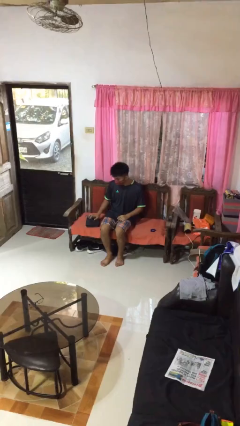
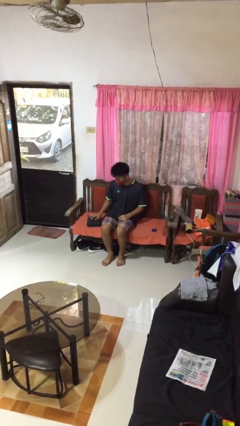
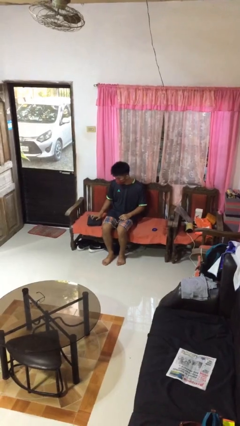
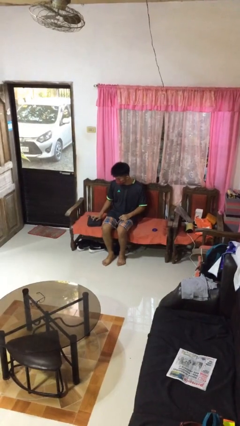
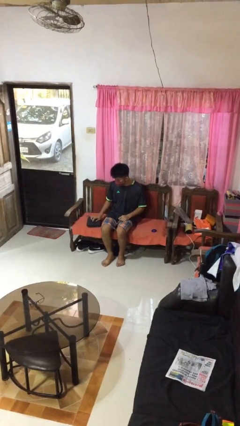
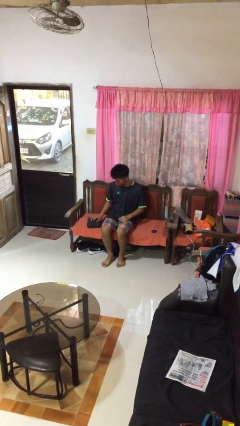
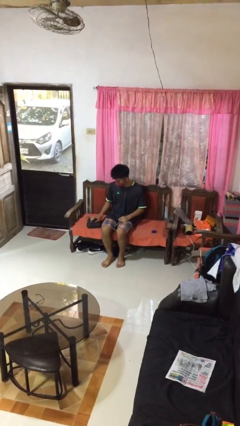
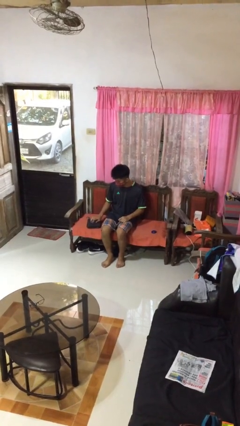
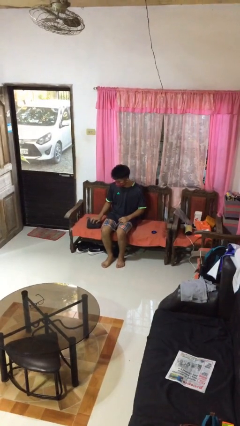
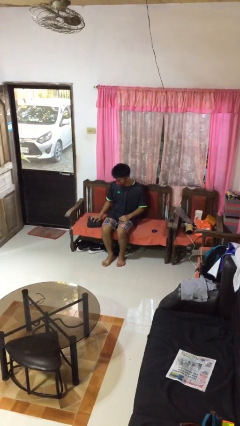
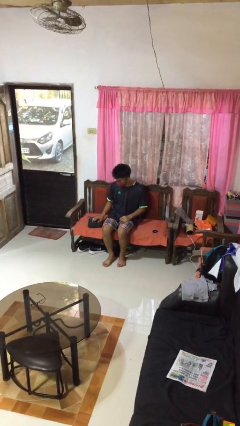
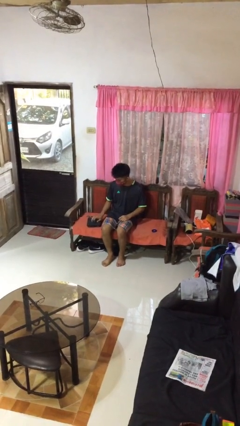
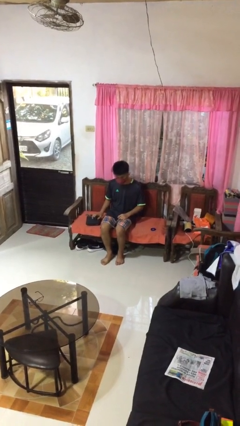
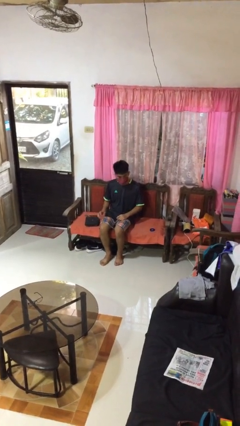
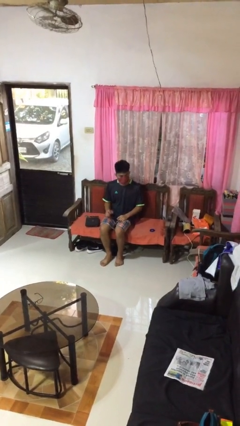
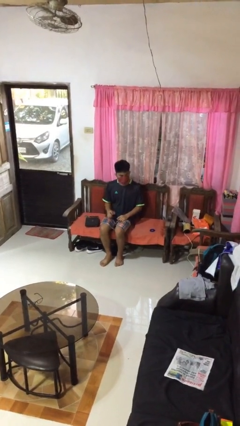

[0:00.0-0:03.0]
person taps object with finger

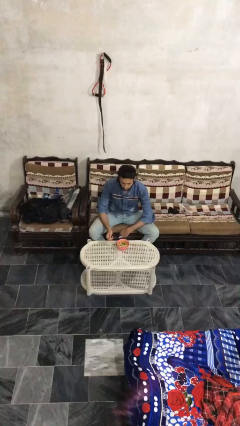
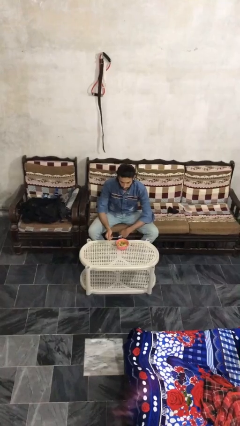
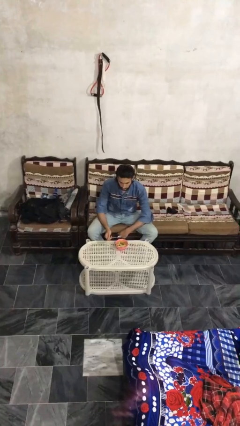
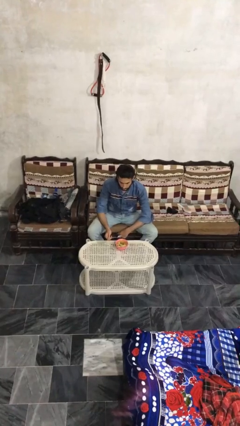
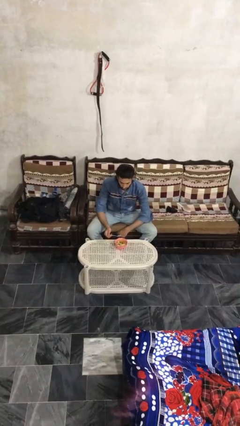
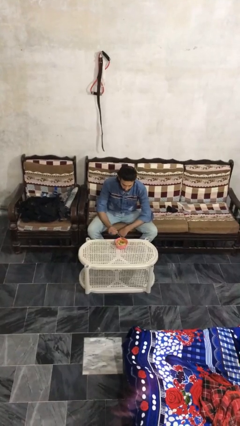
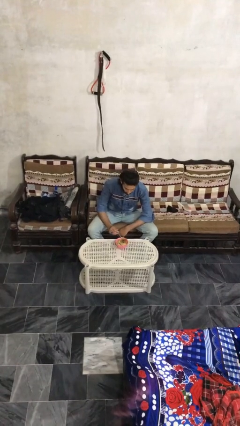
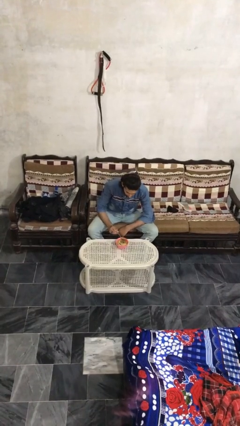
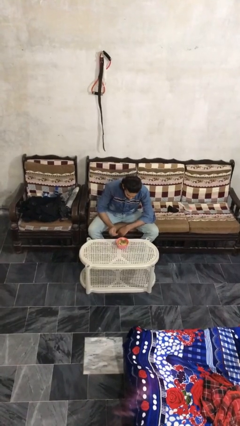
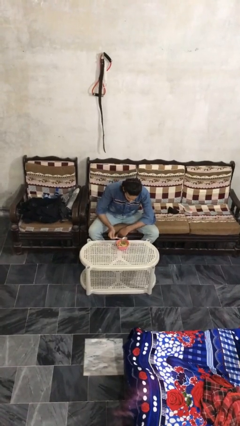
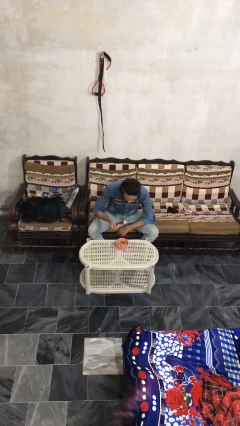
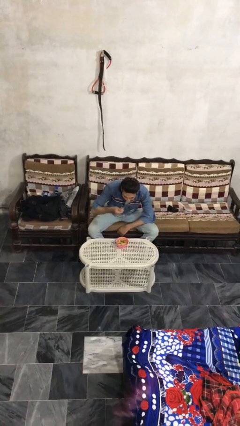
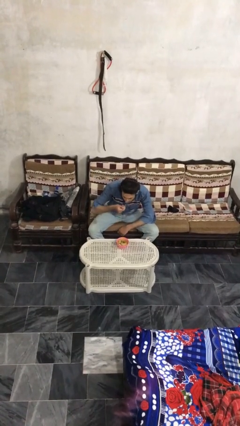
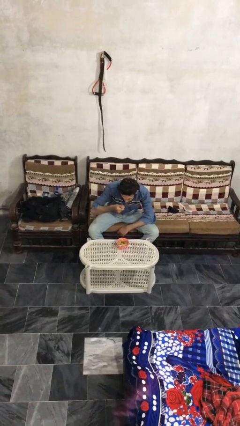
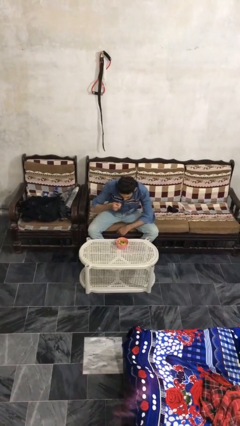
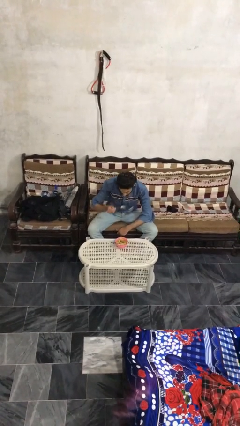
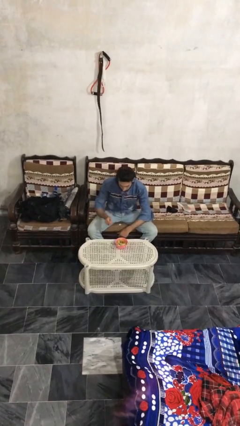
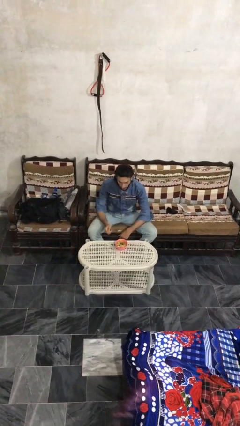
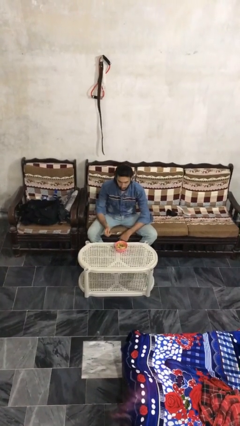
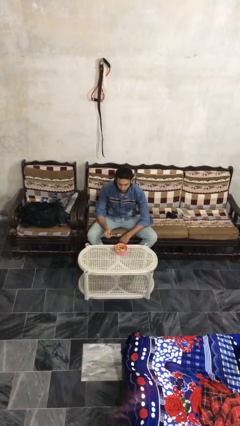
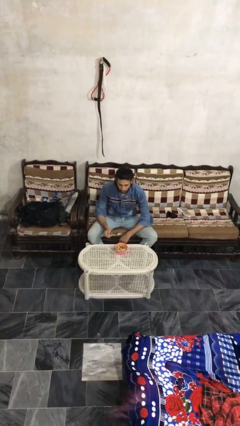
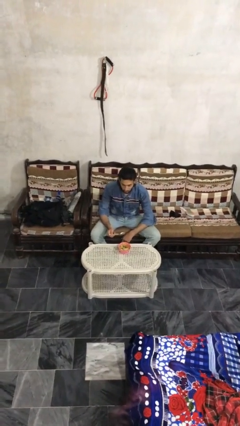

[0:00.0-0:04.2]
person eats with utensil

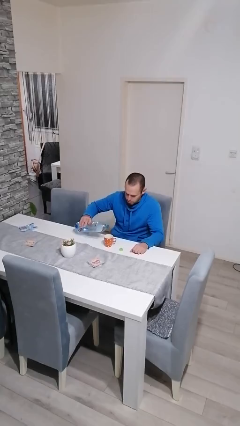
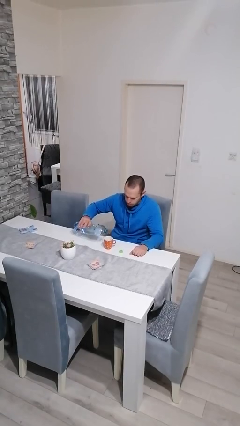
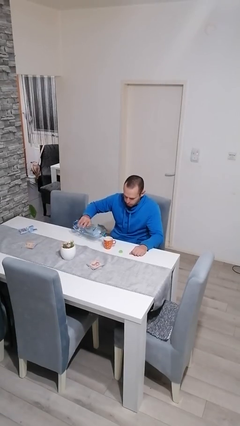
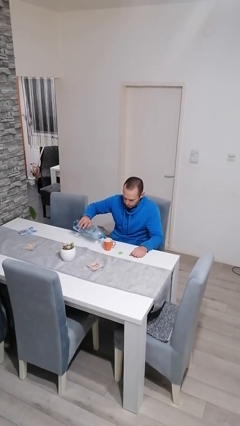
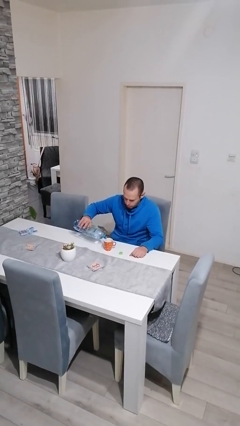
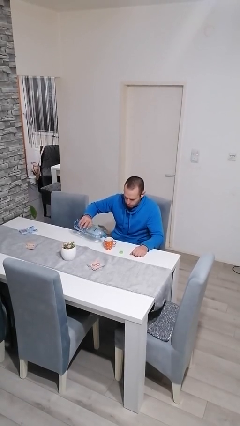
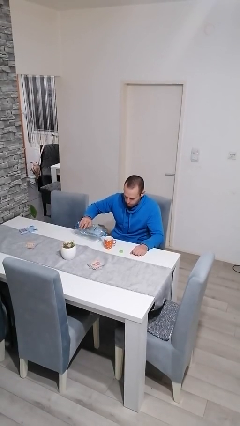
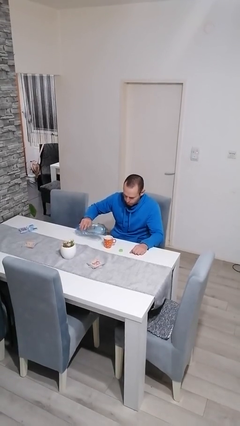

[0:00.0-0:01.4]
person pours liquid into cup

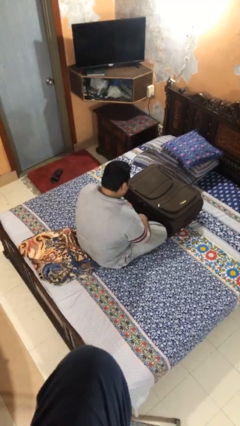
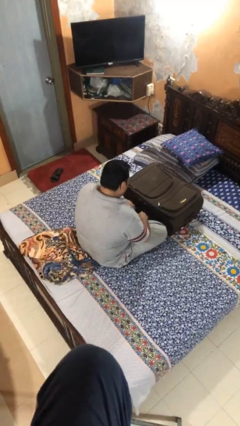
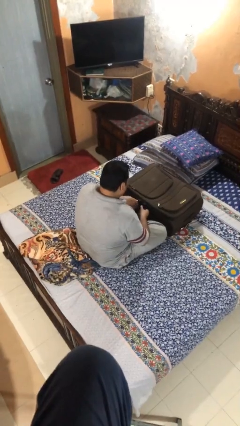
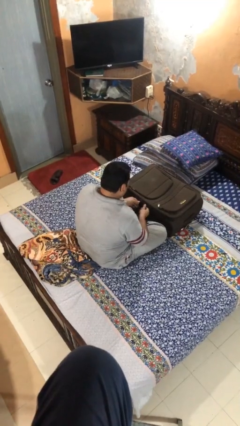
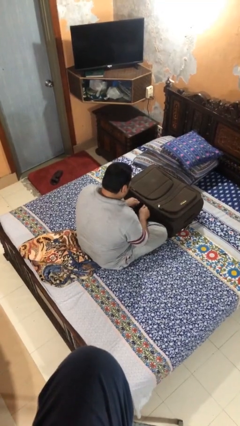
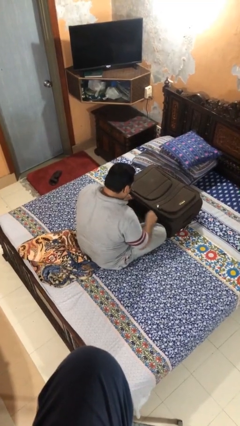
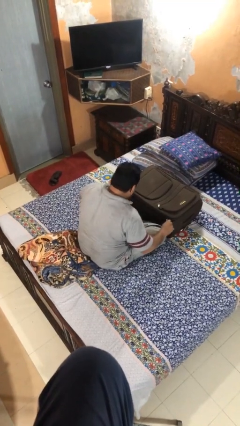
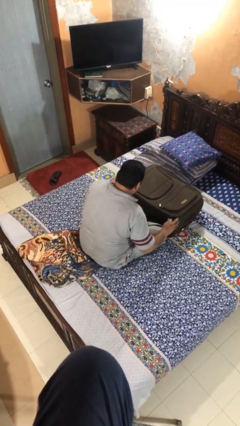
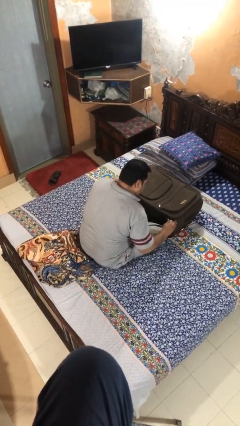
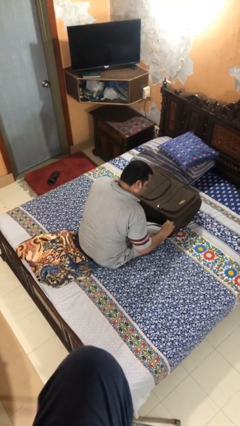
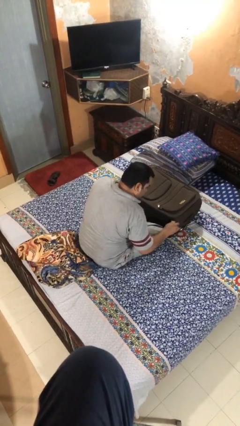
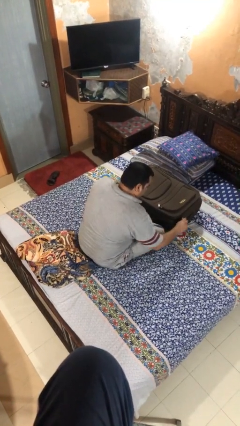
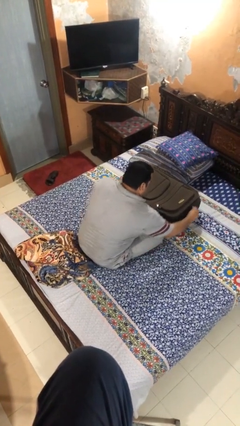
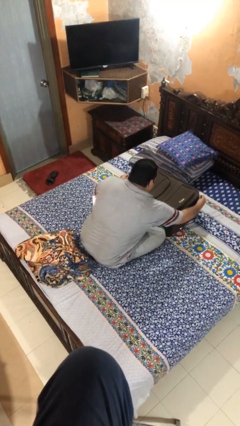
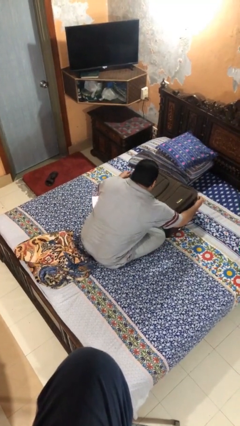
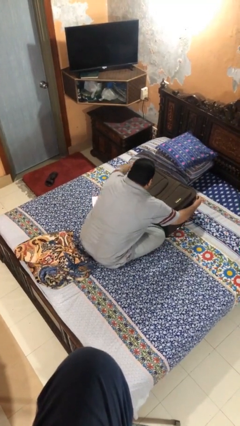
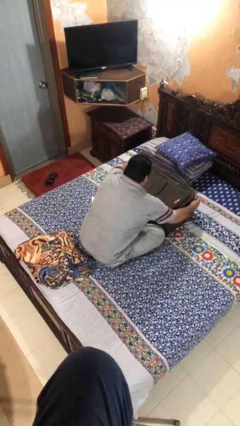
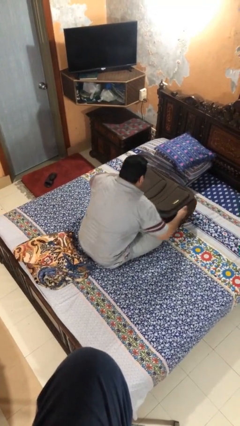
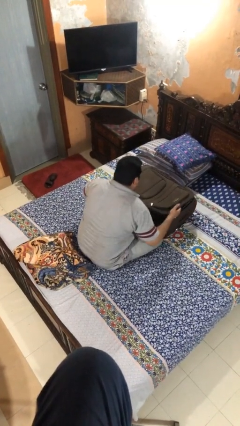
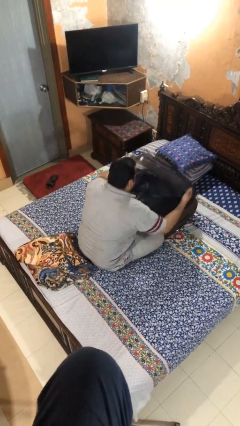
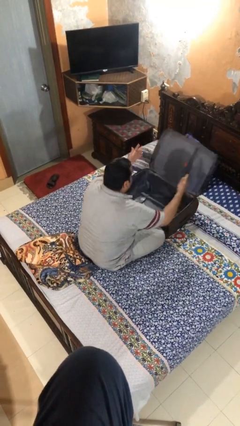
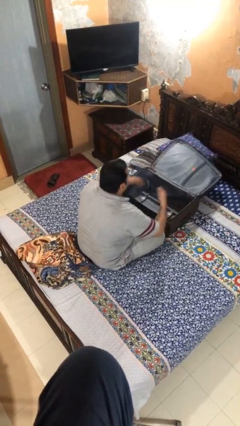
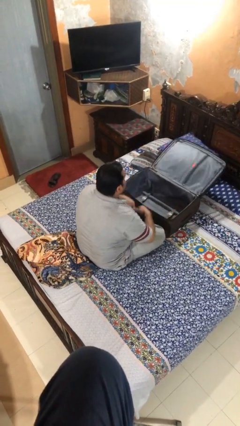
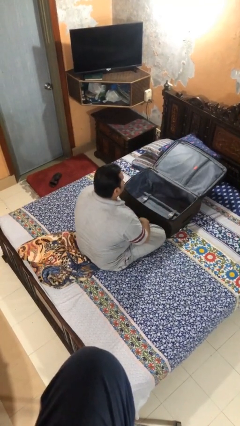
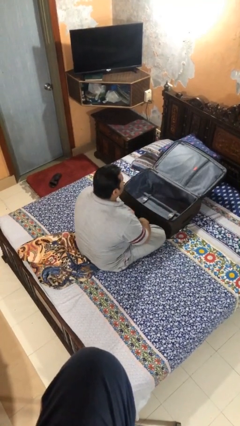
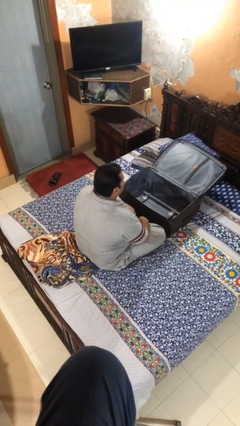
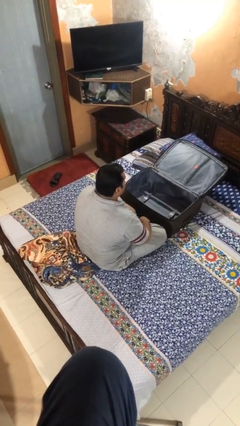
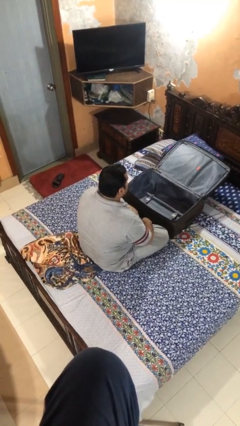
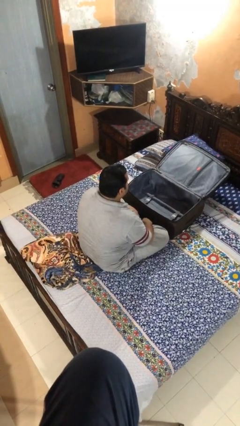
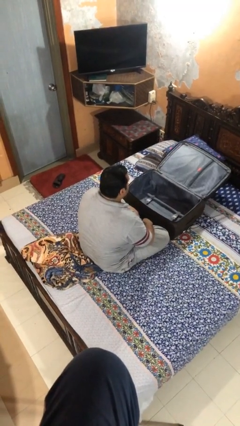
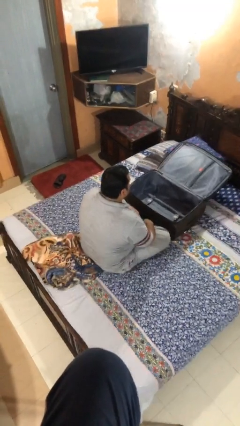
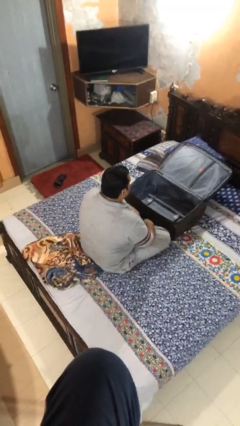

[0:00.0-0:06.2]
person opens suitcase

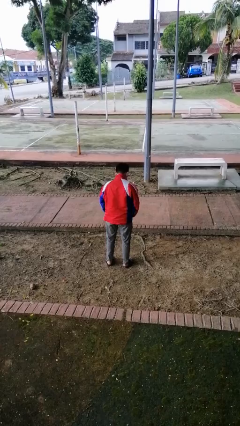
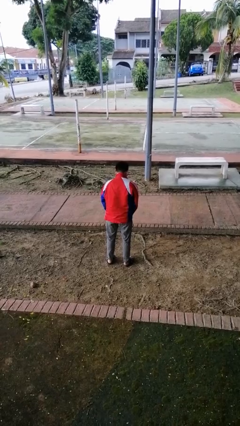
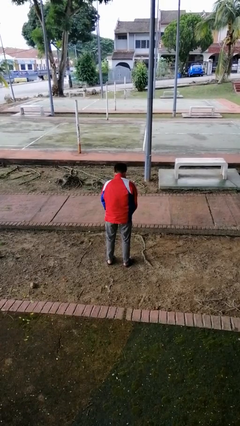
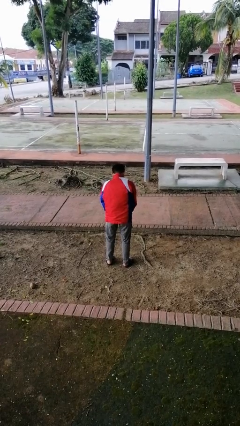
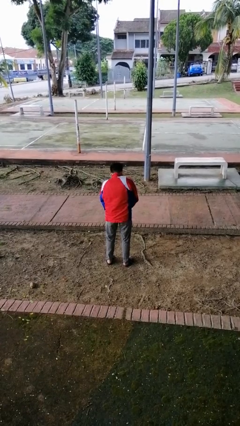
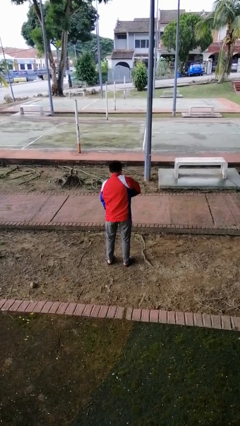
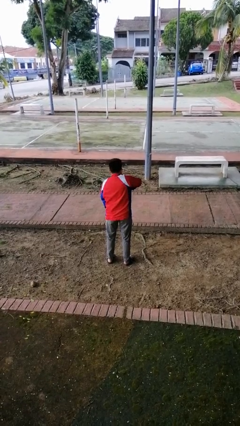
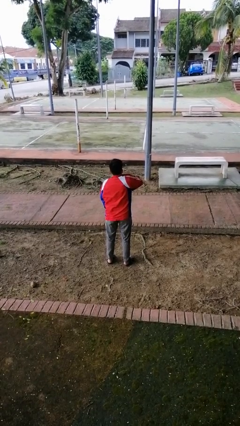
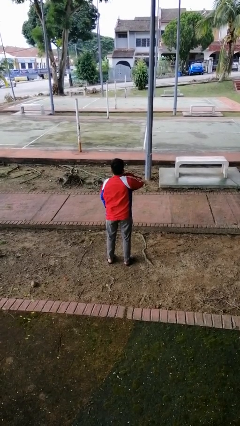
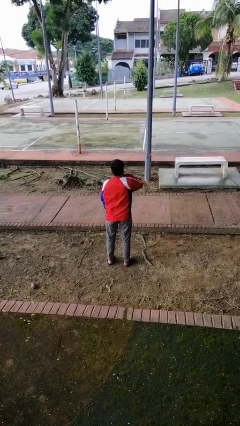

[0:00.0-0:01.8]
person zips up jacket

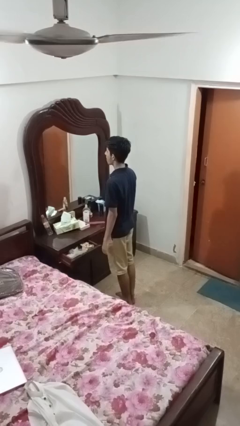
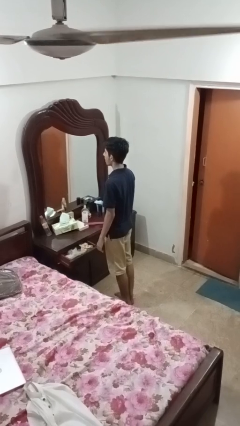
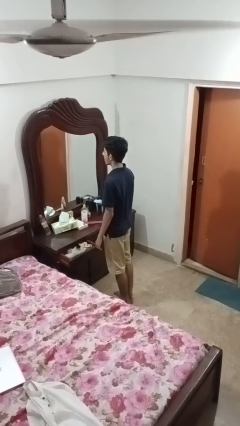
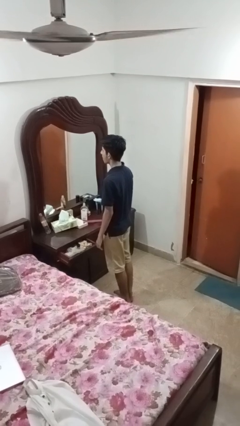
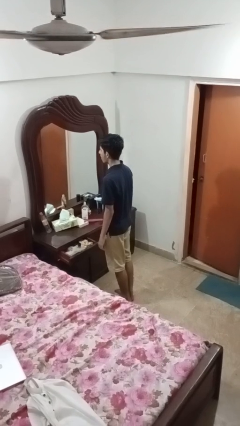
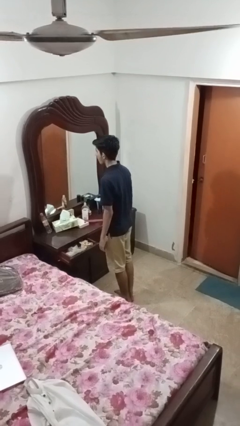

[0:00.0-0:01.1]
person closes dresser drawer
